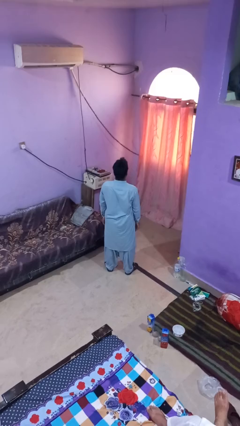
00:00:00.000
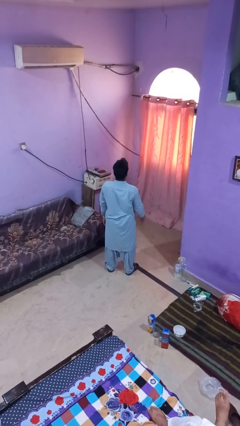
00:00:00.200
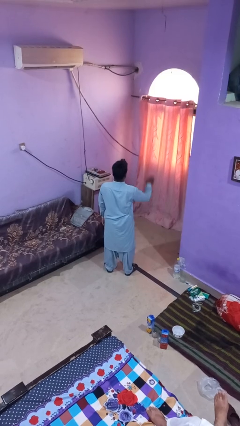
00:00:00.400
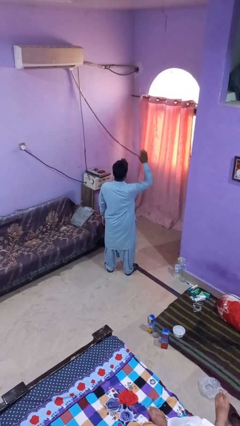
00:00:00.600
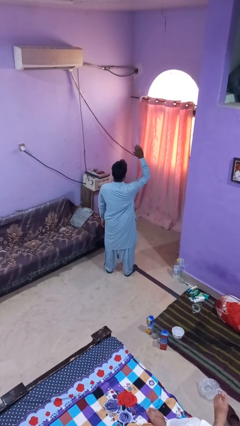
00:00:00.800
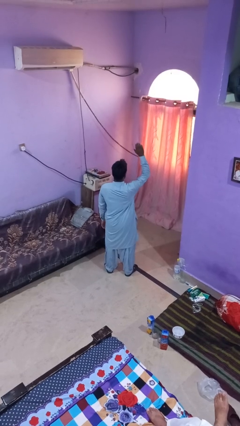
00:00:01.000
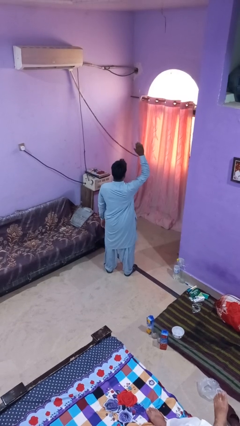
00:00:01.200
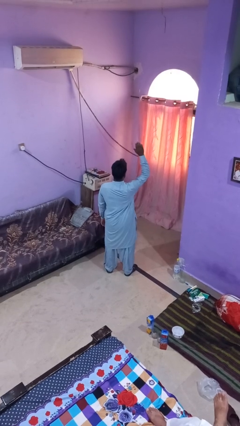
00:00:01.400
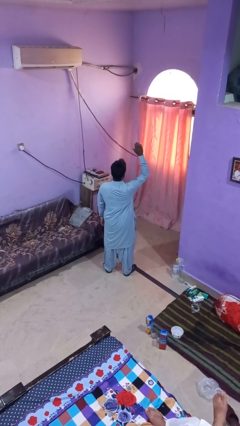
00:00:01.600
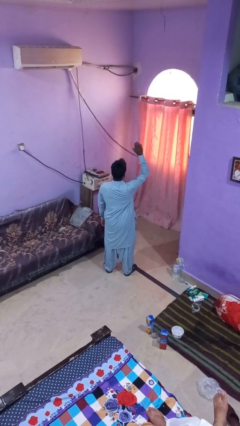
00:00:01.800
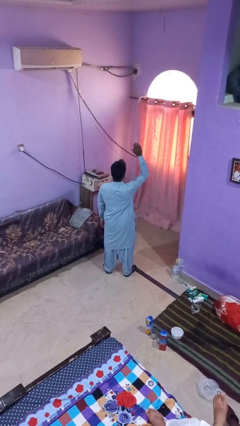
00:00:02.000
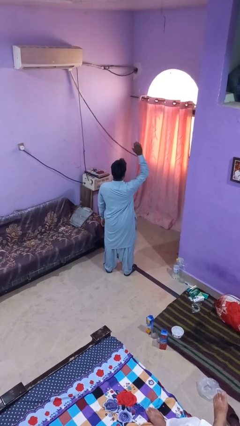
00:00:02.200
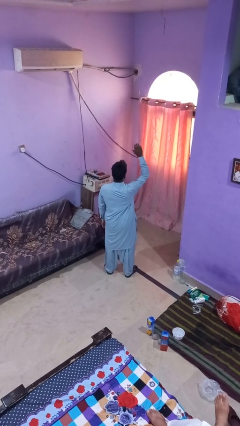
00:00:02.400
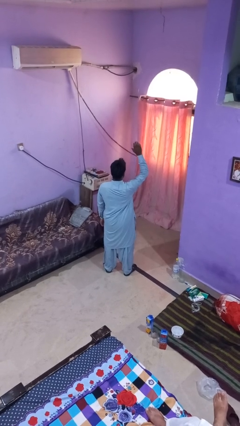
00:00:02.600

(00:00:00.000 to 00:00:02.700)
person gestures raise hand

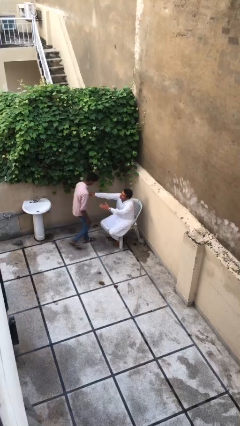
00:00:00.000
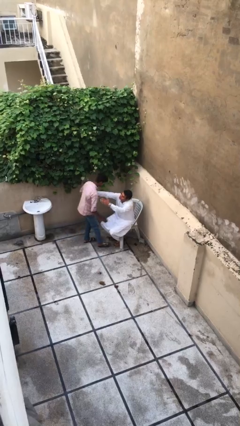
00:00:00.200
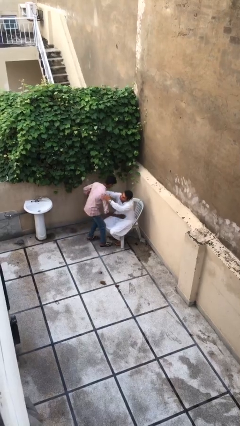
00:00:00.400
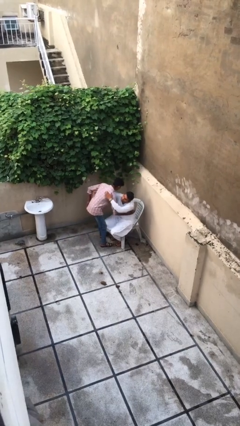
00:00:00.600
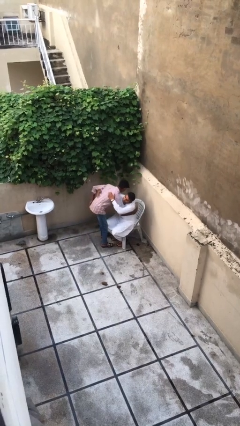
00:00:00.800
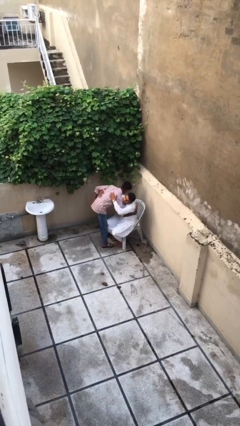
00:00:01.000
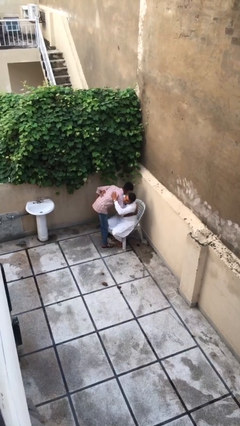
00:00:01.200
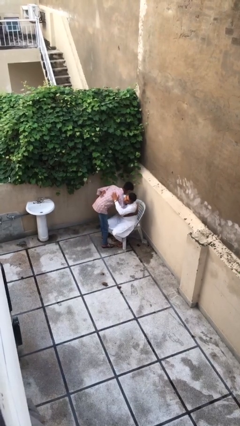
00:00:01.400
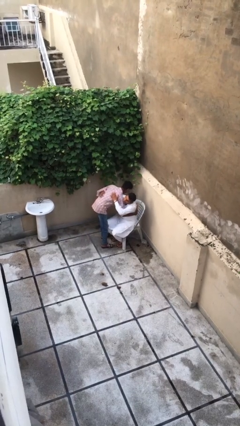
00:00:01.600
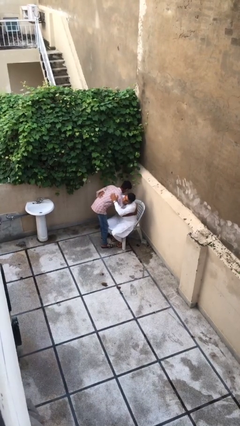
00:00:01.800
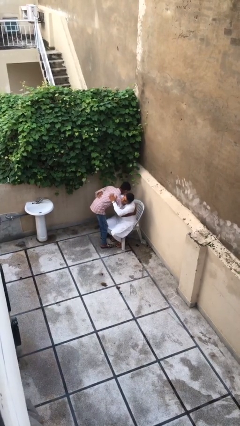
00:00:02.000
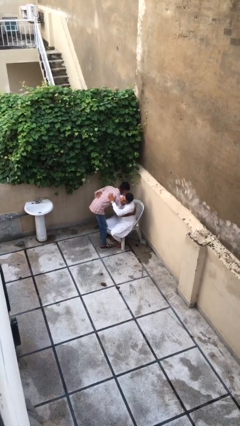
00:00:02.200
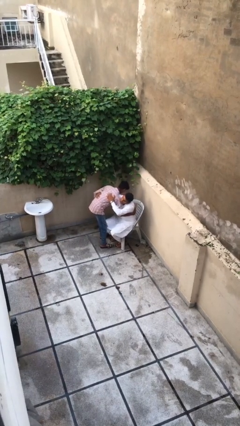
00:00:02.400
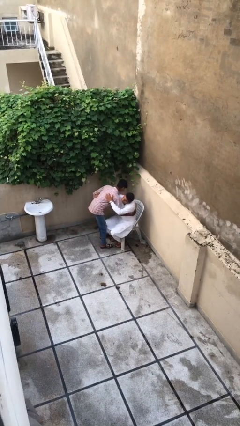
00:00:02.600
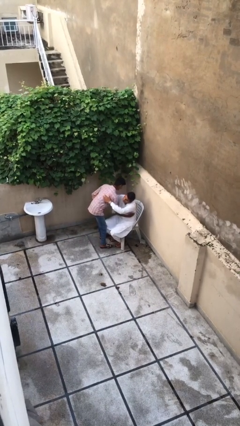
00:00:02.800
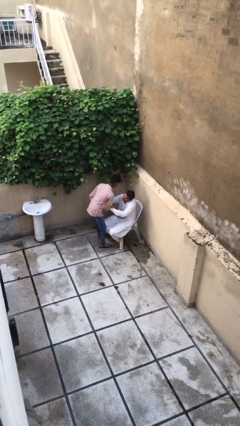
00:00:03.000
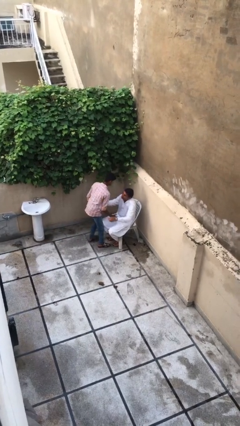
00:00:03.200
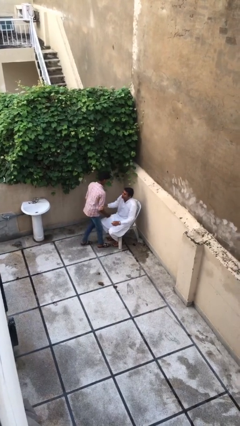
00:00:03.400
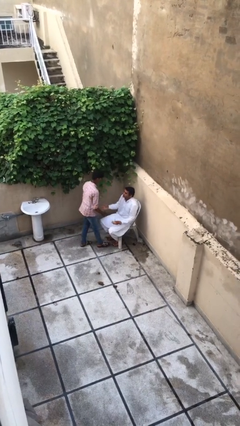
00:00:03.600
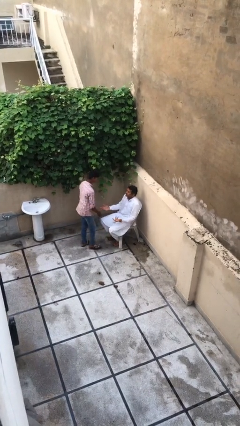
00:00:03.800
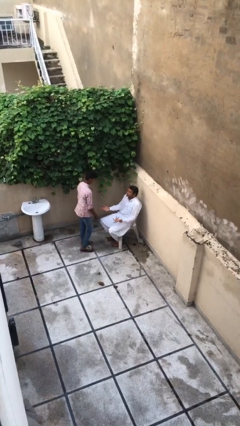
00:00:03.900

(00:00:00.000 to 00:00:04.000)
person embraces person

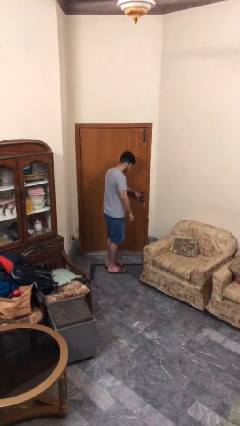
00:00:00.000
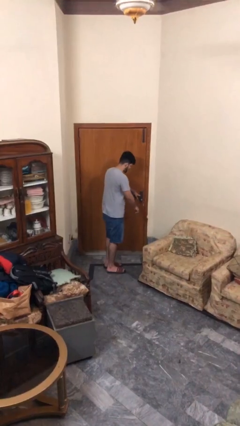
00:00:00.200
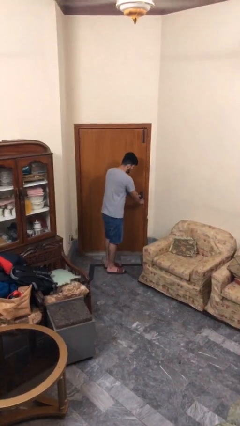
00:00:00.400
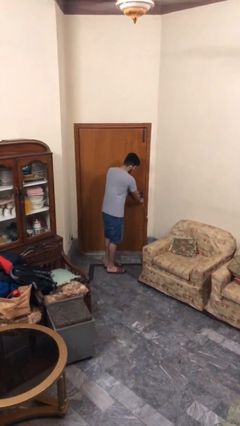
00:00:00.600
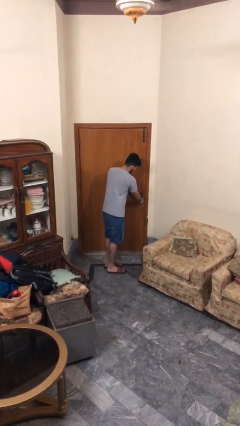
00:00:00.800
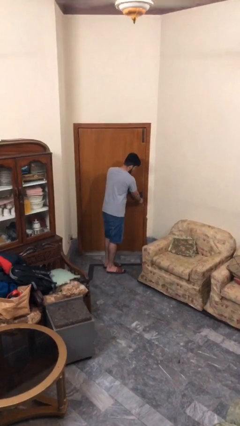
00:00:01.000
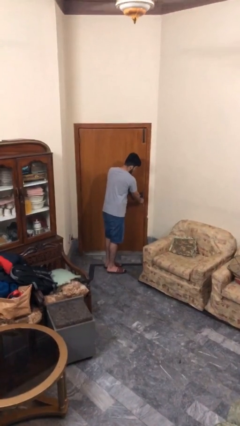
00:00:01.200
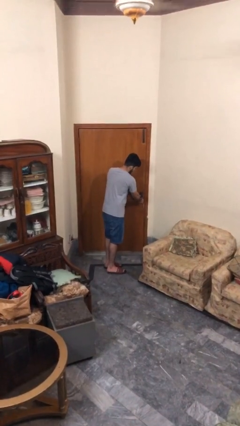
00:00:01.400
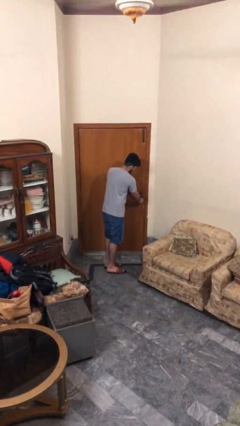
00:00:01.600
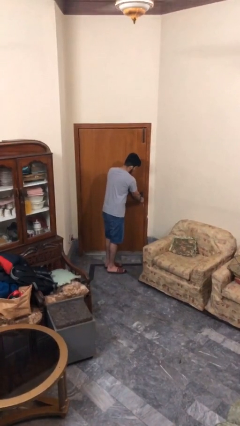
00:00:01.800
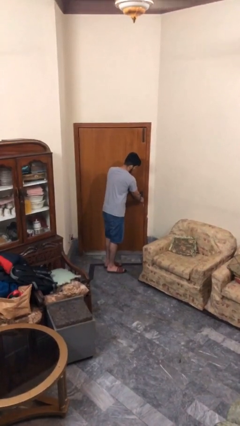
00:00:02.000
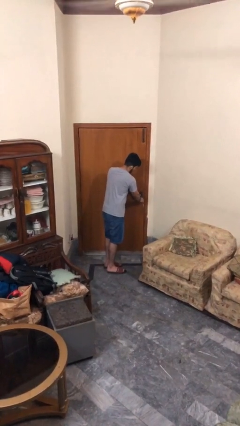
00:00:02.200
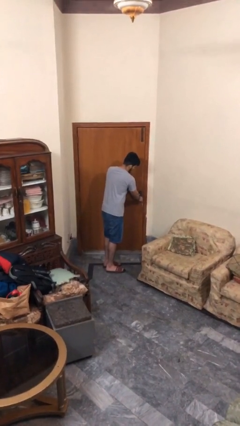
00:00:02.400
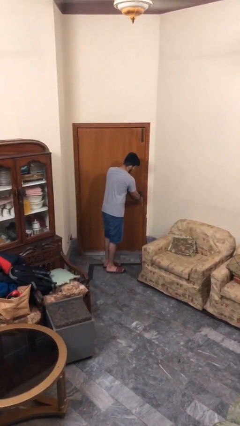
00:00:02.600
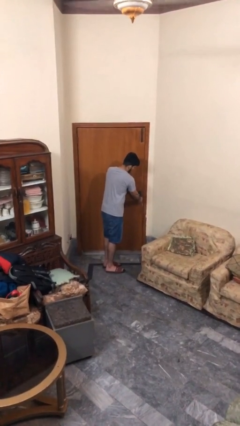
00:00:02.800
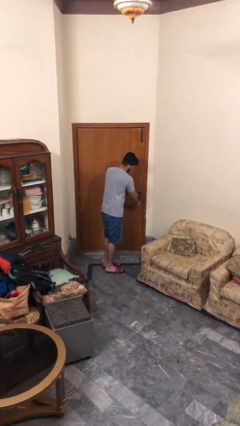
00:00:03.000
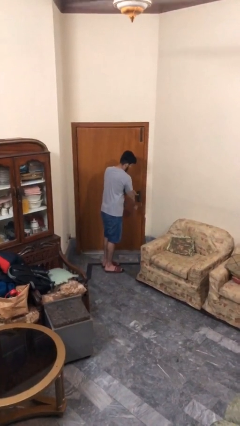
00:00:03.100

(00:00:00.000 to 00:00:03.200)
person locks door with keys

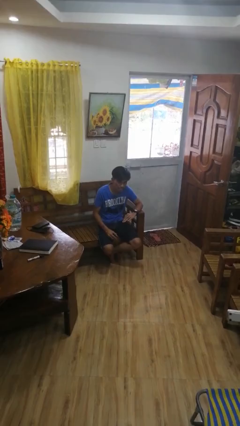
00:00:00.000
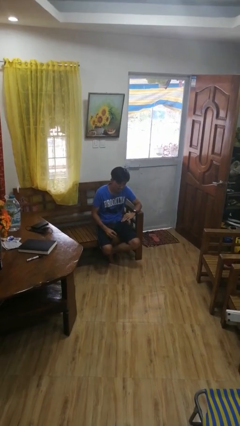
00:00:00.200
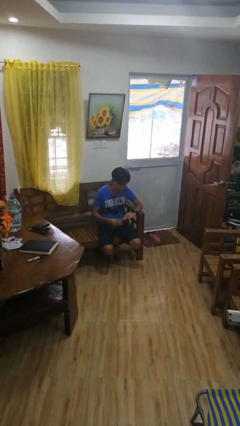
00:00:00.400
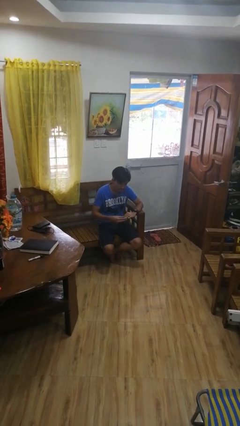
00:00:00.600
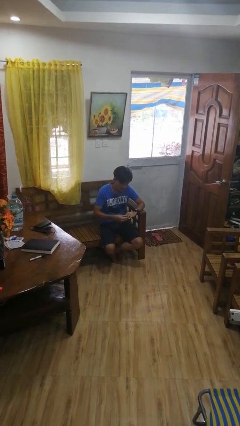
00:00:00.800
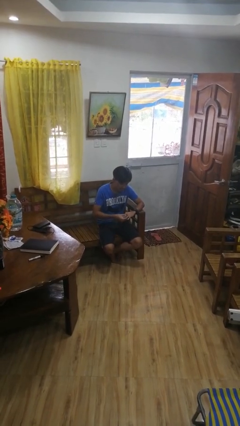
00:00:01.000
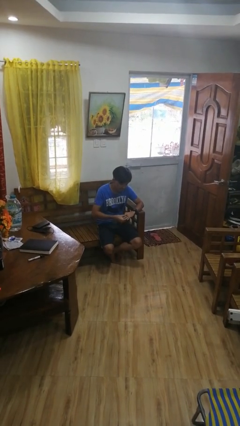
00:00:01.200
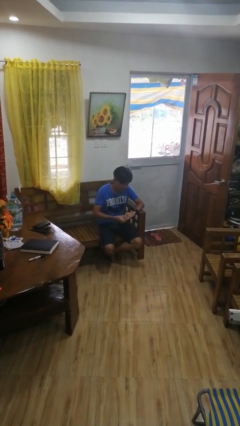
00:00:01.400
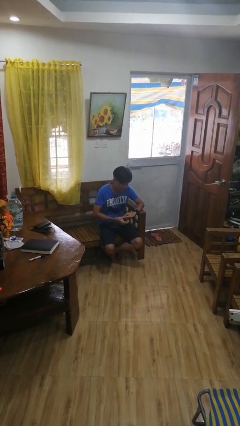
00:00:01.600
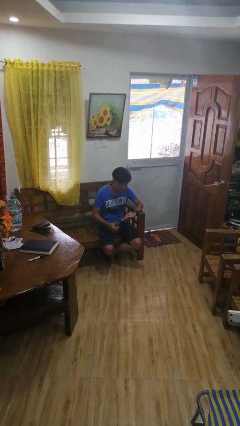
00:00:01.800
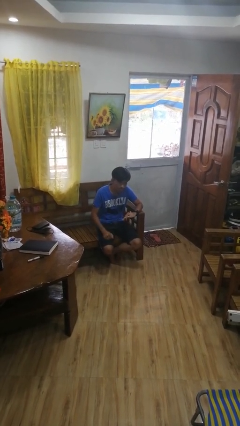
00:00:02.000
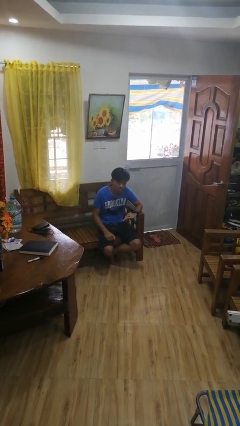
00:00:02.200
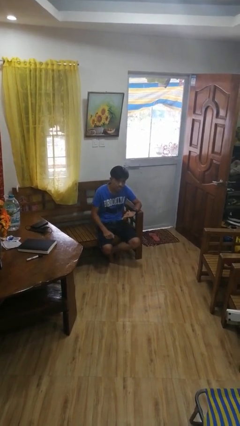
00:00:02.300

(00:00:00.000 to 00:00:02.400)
person puts on ring

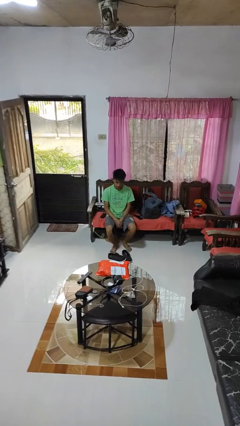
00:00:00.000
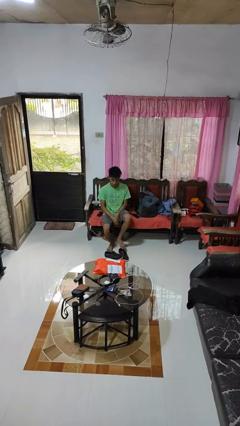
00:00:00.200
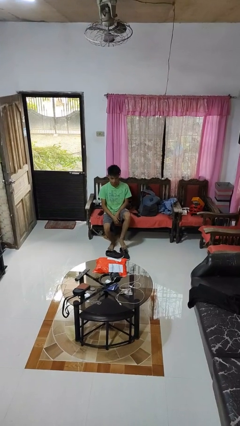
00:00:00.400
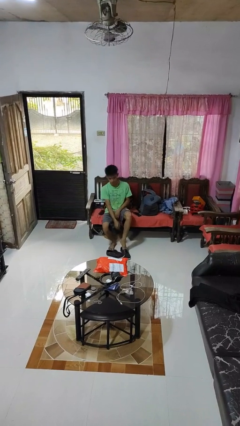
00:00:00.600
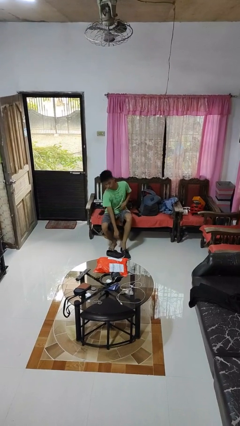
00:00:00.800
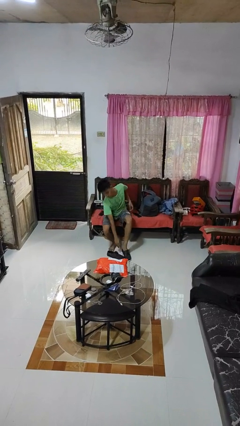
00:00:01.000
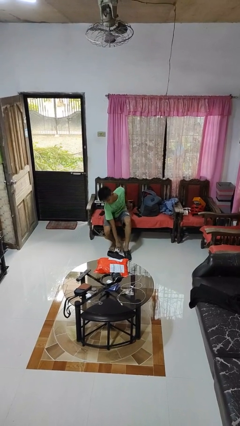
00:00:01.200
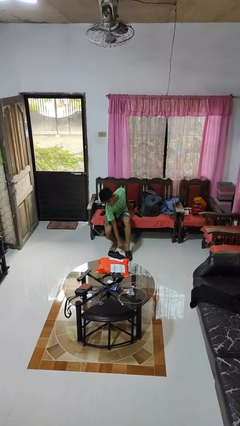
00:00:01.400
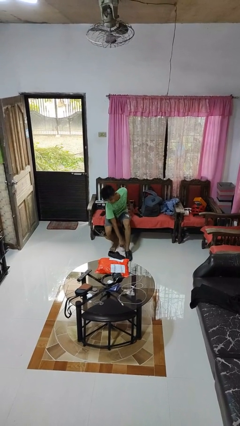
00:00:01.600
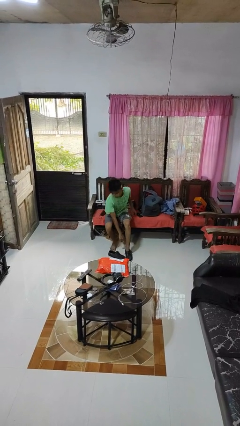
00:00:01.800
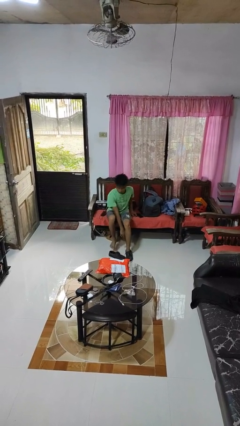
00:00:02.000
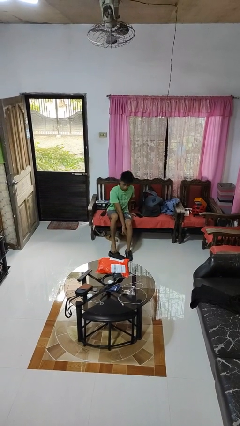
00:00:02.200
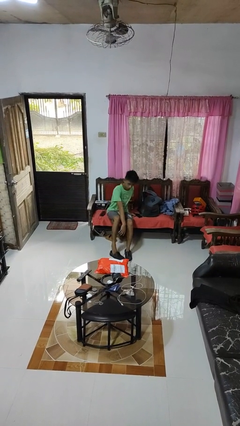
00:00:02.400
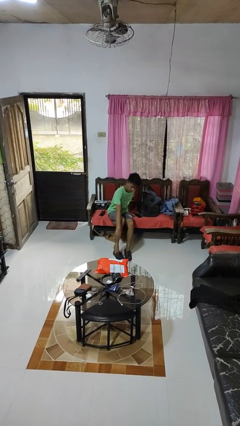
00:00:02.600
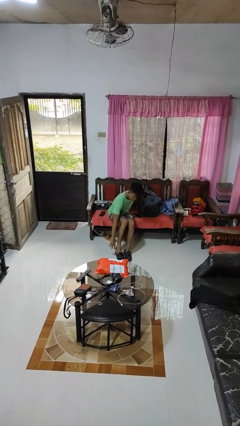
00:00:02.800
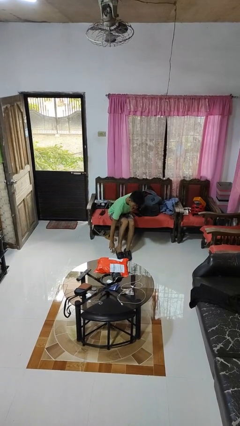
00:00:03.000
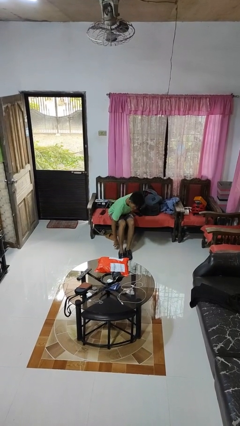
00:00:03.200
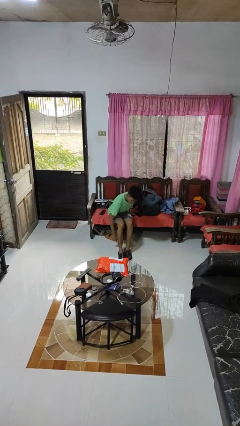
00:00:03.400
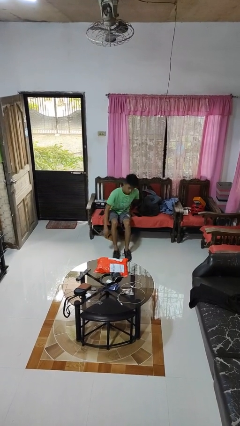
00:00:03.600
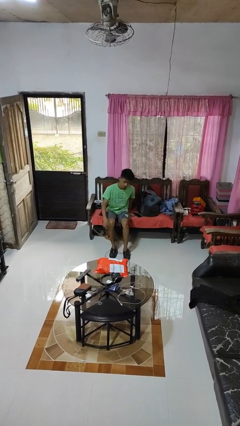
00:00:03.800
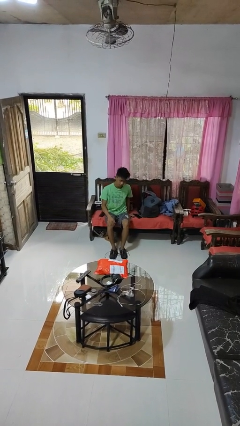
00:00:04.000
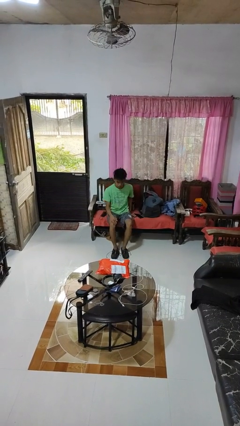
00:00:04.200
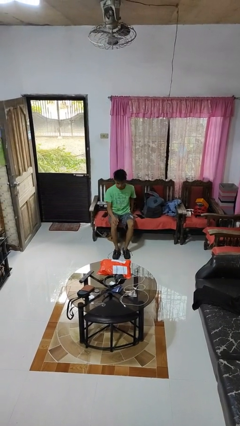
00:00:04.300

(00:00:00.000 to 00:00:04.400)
person puts on shoes

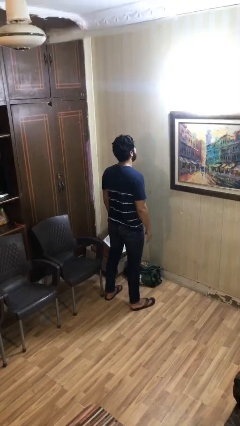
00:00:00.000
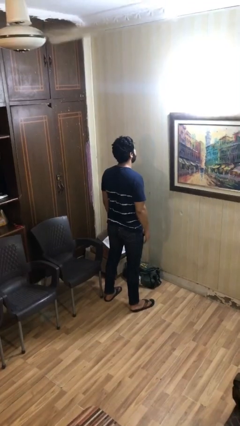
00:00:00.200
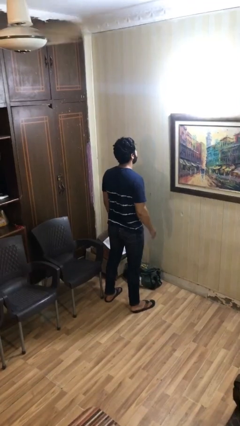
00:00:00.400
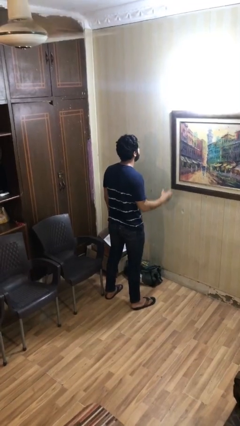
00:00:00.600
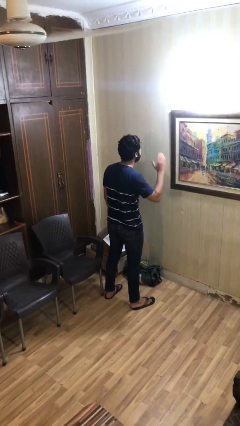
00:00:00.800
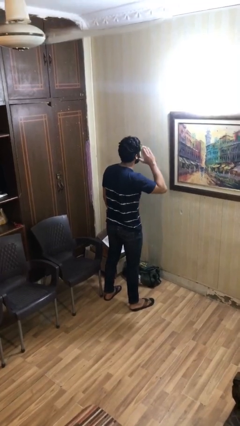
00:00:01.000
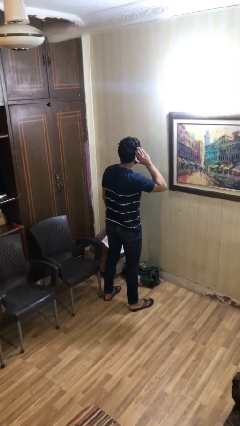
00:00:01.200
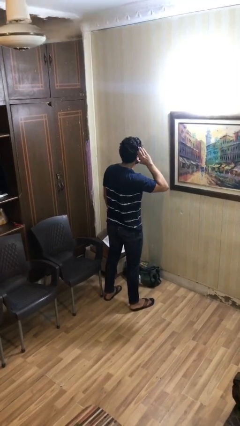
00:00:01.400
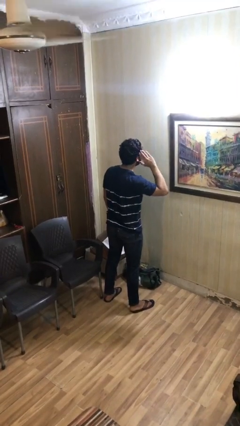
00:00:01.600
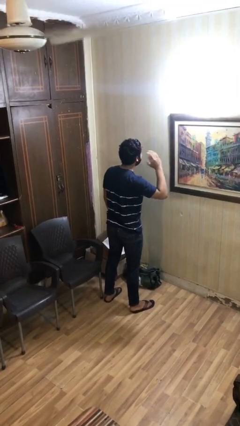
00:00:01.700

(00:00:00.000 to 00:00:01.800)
person gestures listen closely
